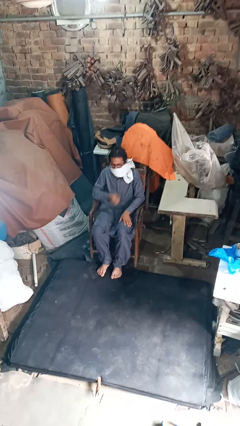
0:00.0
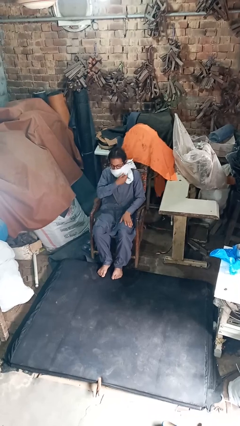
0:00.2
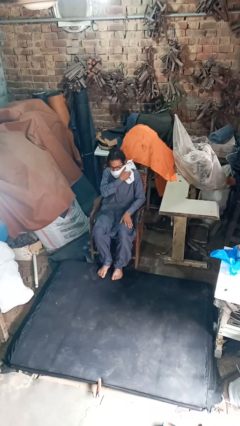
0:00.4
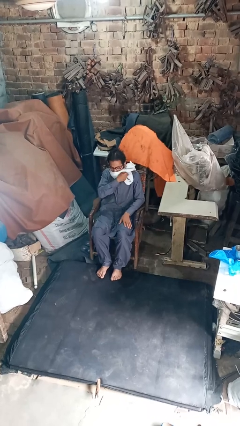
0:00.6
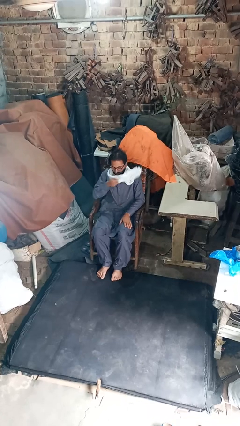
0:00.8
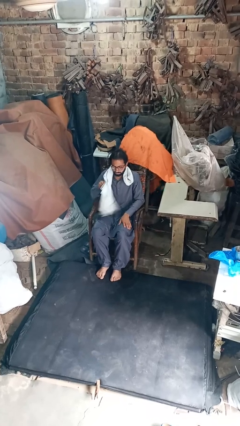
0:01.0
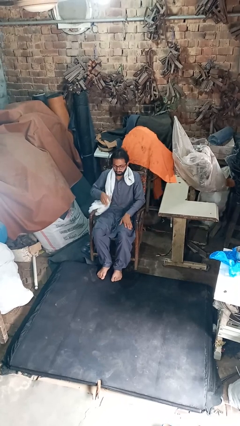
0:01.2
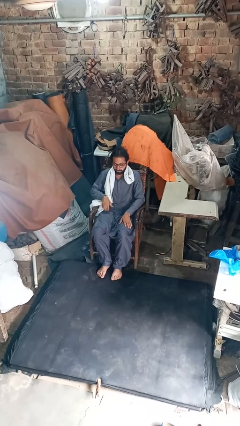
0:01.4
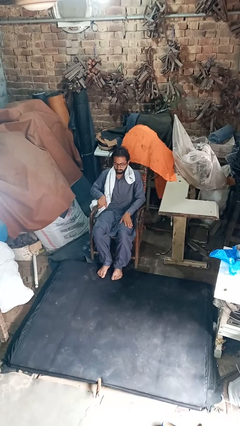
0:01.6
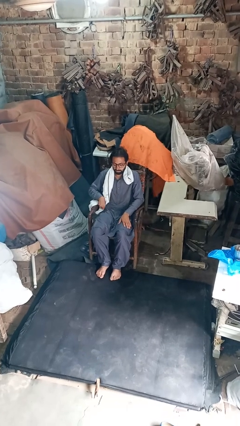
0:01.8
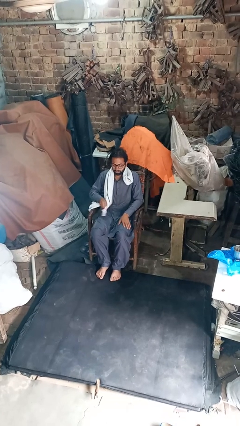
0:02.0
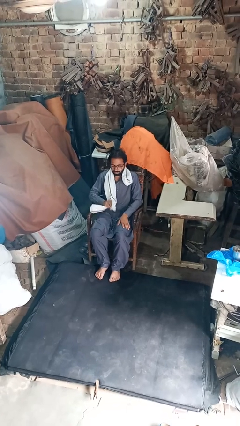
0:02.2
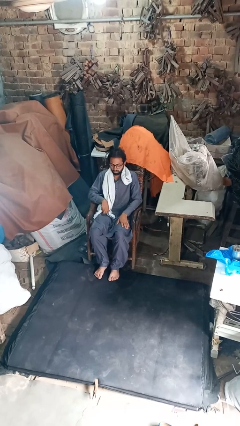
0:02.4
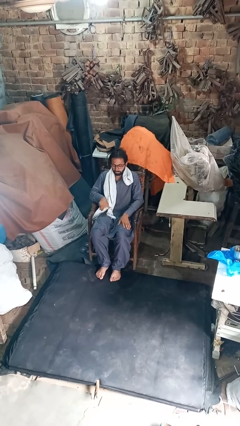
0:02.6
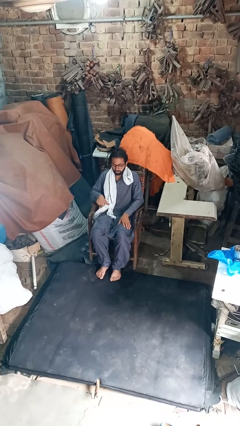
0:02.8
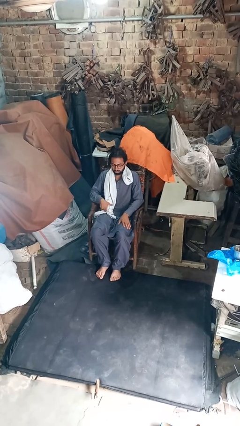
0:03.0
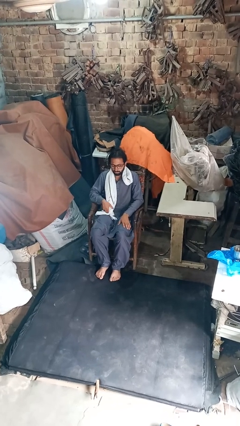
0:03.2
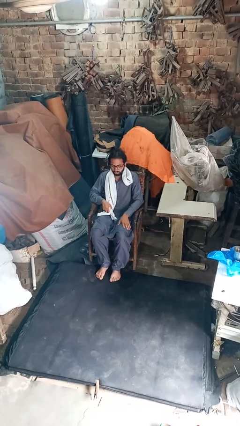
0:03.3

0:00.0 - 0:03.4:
person takes off scarf

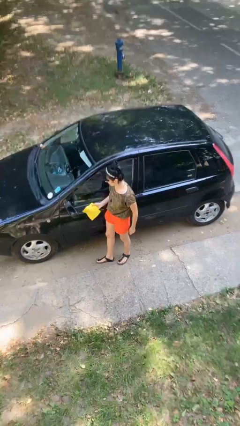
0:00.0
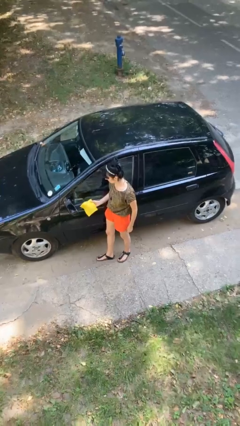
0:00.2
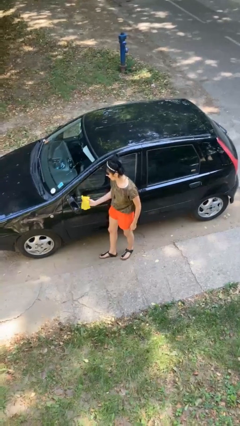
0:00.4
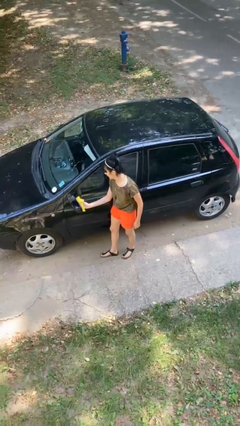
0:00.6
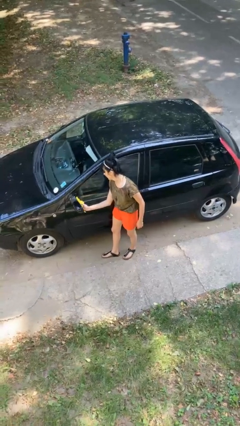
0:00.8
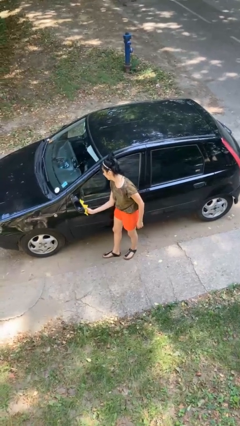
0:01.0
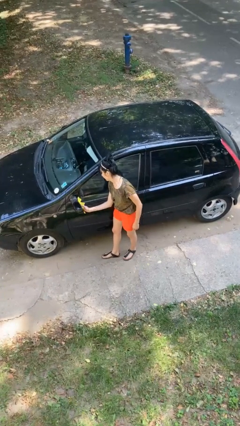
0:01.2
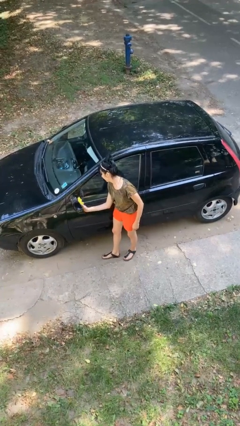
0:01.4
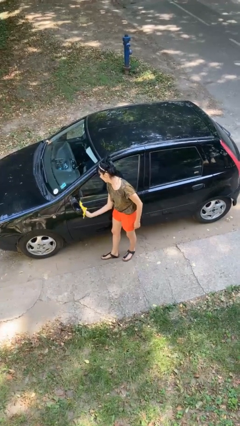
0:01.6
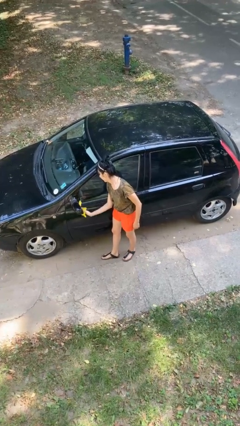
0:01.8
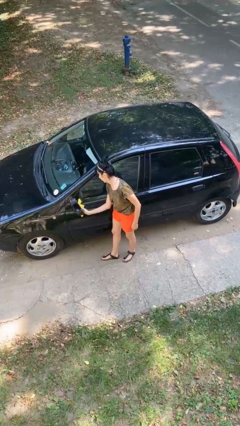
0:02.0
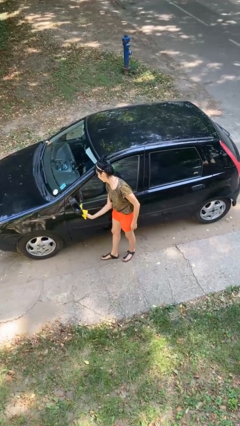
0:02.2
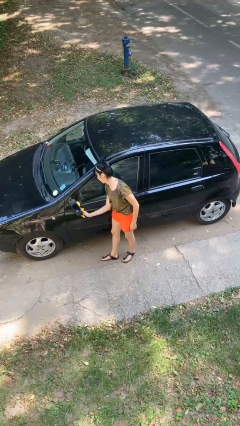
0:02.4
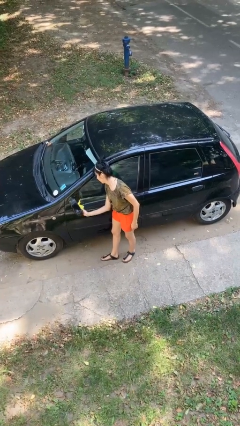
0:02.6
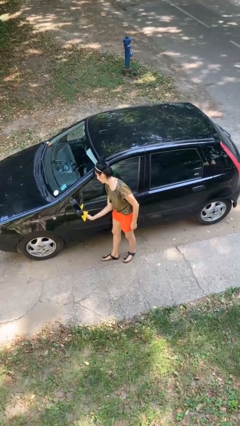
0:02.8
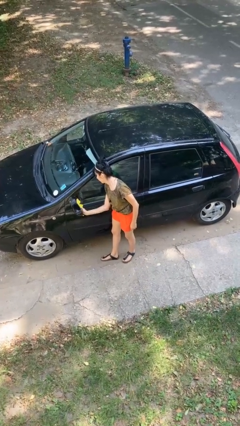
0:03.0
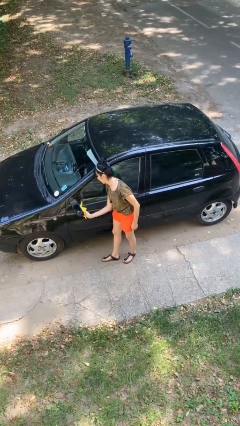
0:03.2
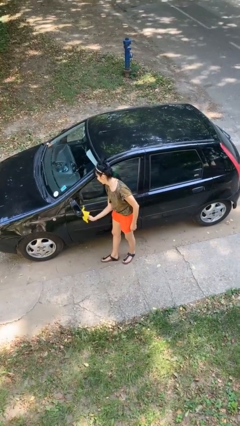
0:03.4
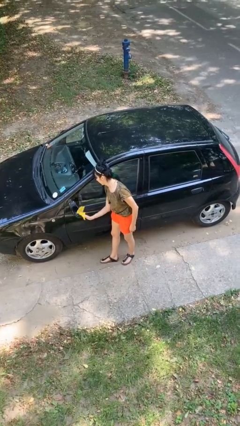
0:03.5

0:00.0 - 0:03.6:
person polishes car with rag

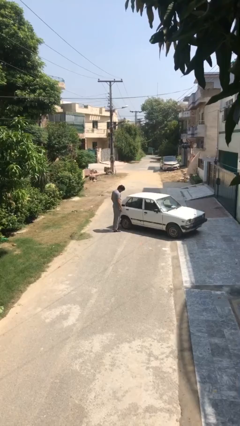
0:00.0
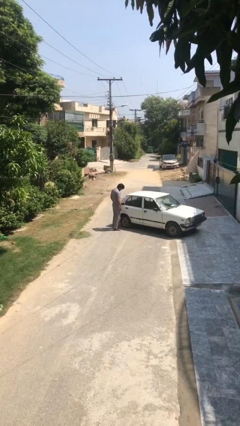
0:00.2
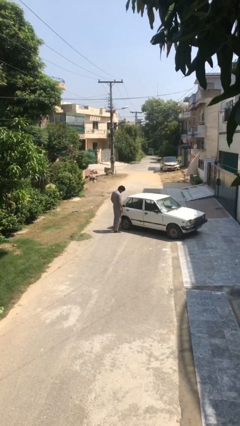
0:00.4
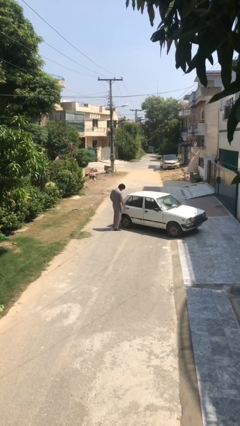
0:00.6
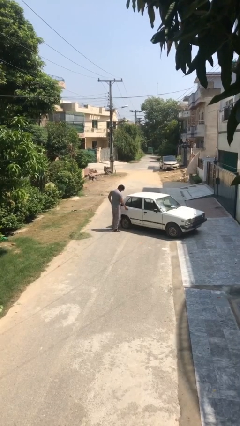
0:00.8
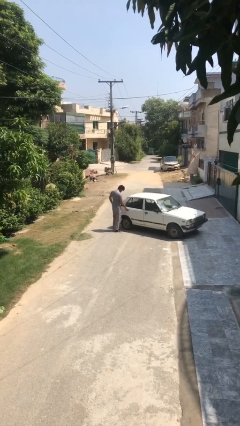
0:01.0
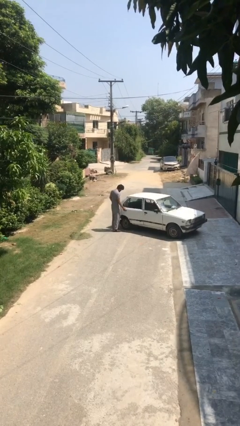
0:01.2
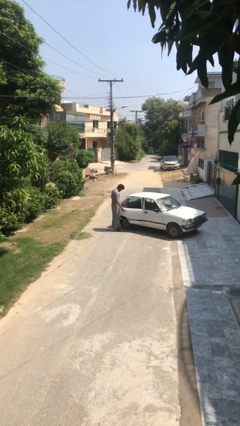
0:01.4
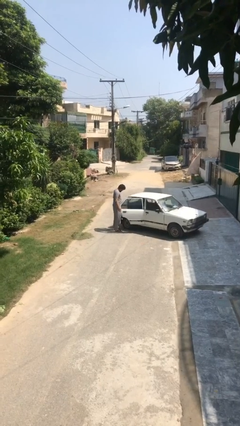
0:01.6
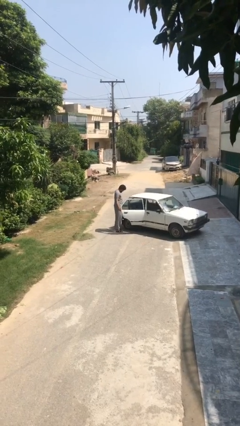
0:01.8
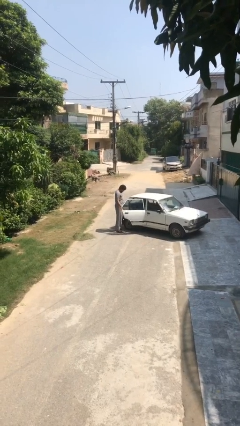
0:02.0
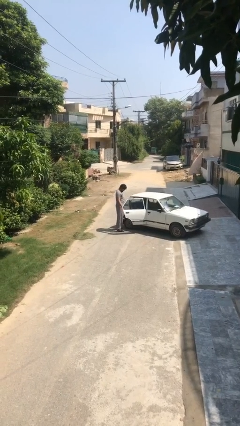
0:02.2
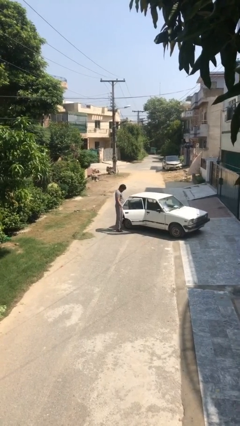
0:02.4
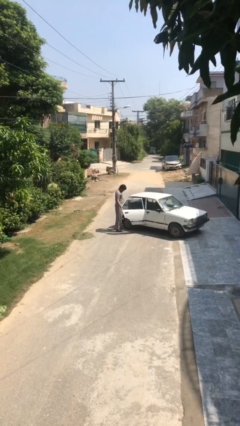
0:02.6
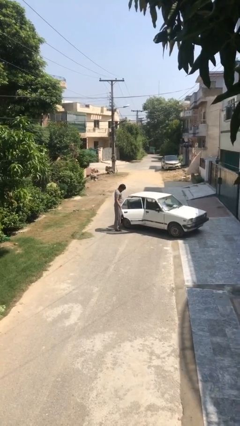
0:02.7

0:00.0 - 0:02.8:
person opens car door

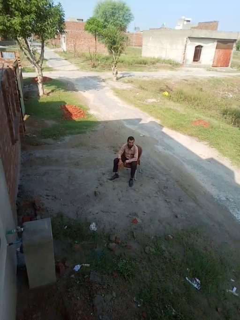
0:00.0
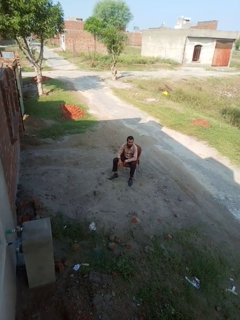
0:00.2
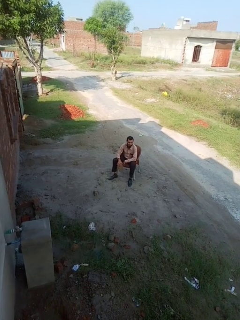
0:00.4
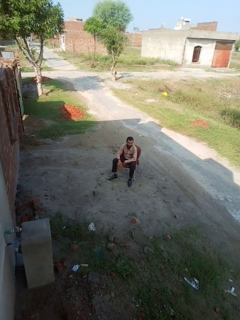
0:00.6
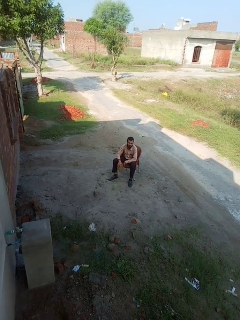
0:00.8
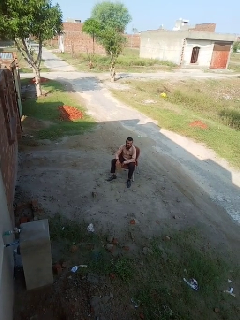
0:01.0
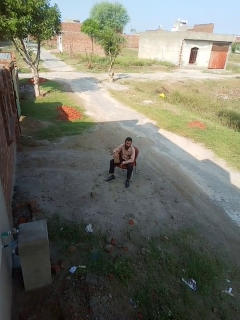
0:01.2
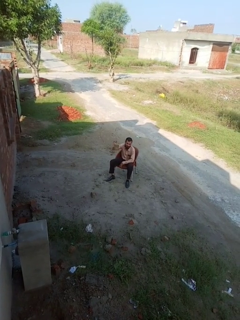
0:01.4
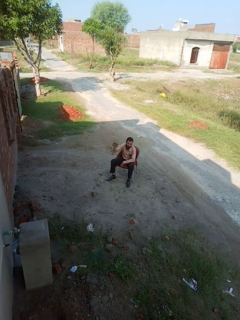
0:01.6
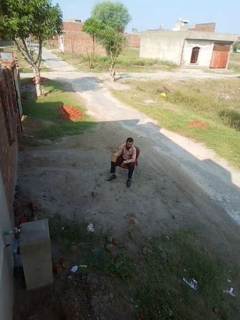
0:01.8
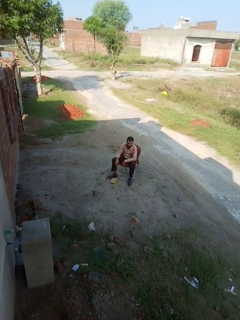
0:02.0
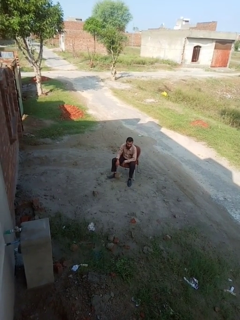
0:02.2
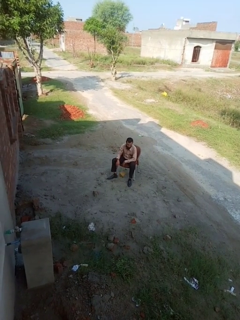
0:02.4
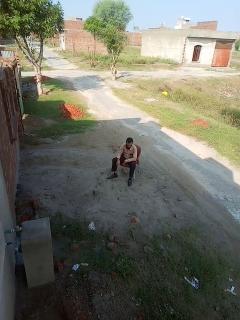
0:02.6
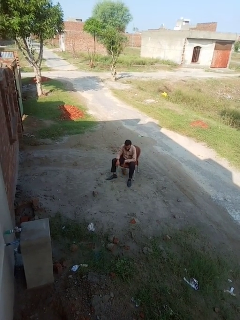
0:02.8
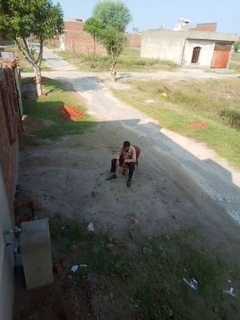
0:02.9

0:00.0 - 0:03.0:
person throws object into air

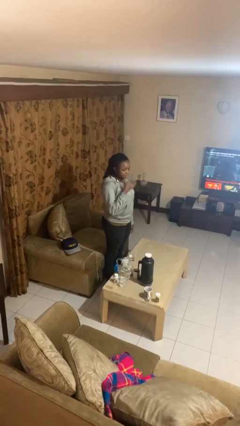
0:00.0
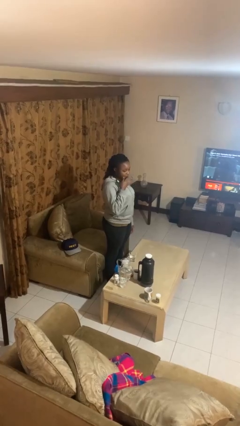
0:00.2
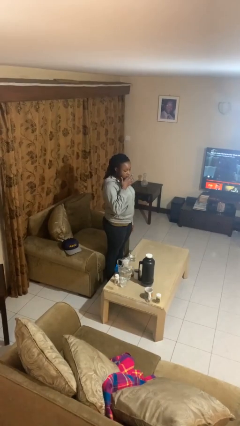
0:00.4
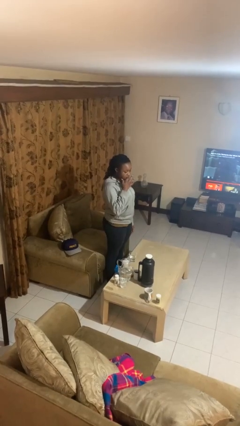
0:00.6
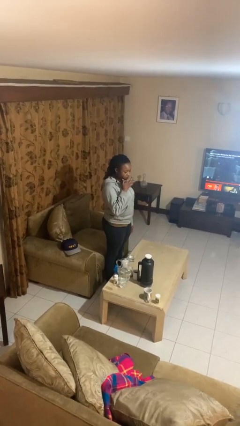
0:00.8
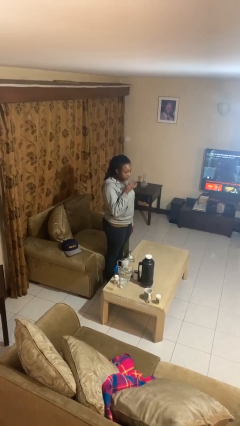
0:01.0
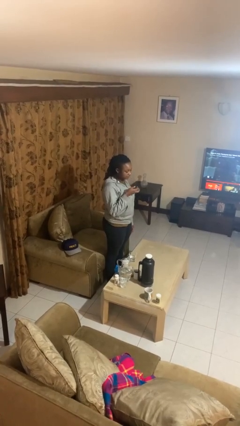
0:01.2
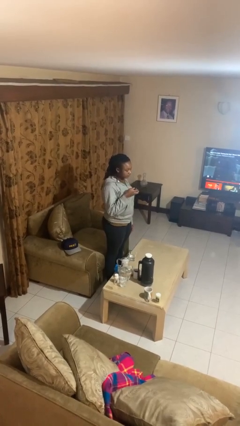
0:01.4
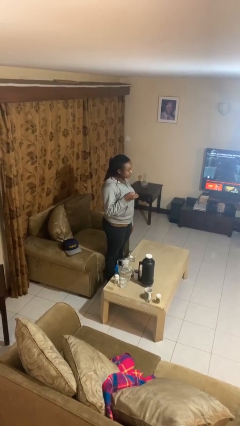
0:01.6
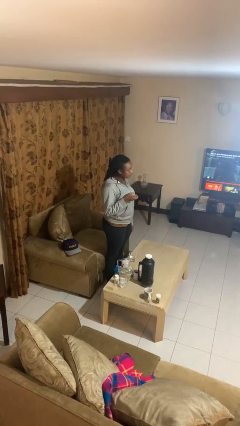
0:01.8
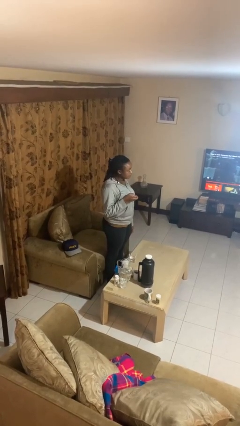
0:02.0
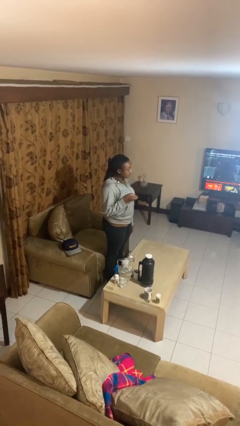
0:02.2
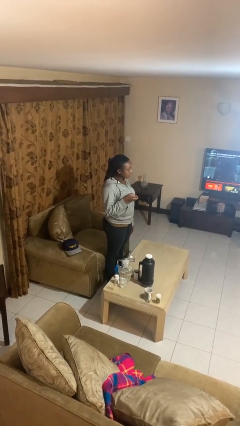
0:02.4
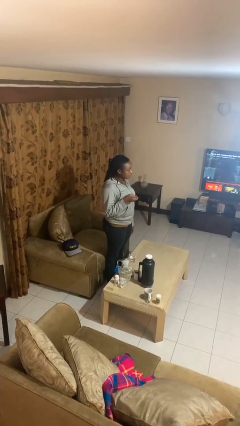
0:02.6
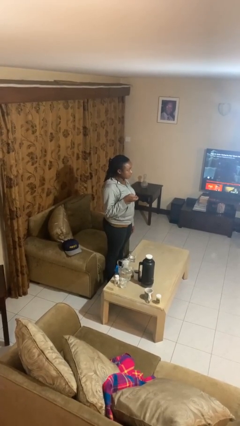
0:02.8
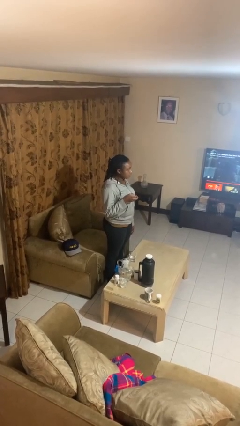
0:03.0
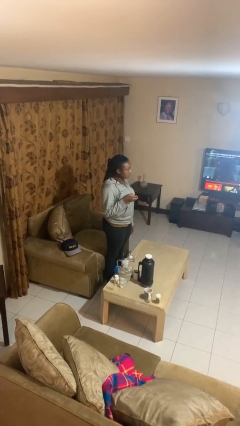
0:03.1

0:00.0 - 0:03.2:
person licks fingers

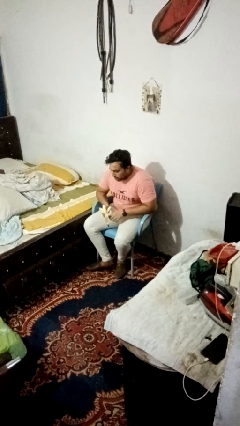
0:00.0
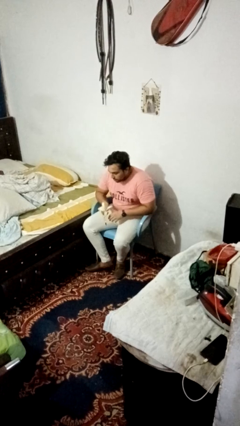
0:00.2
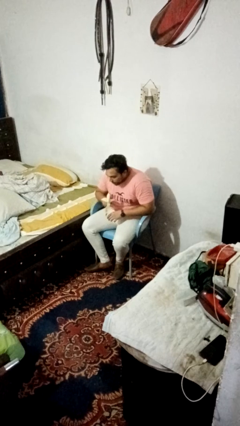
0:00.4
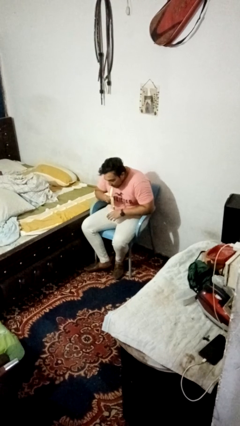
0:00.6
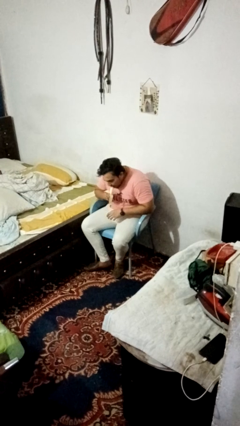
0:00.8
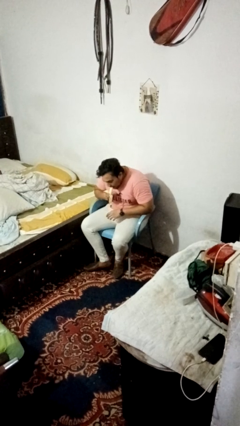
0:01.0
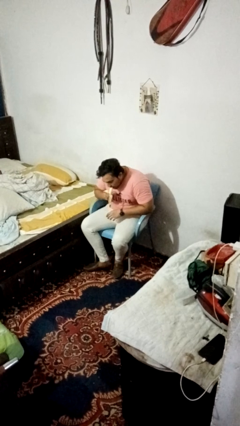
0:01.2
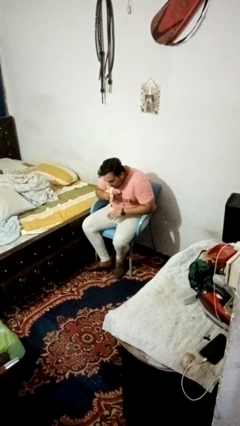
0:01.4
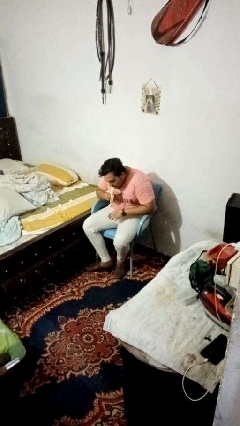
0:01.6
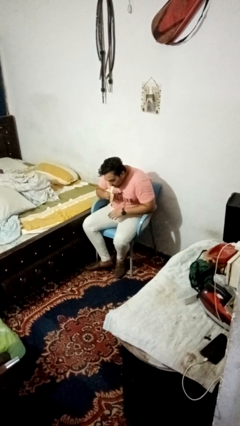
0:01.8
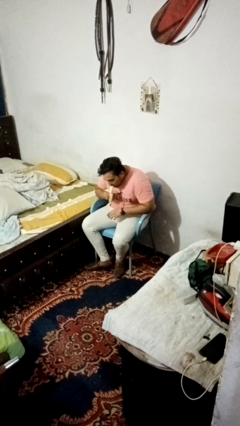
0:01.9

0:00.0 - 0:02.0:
person eats banana

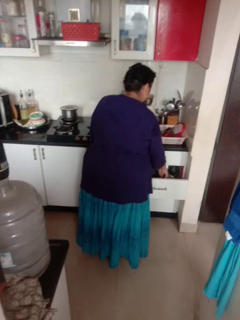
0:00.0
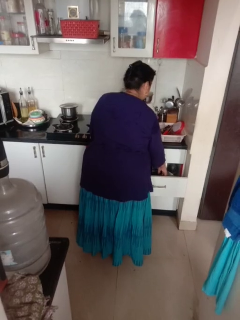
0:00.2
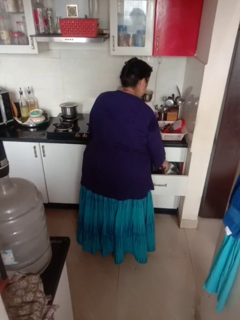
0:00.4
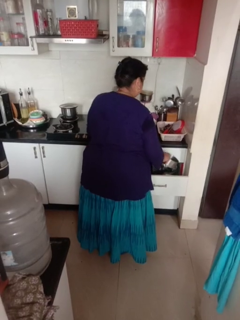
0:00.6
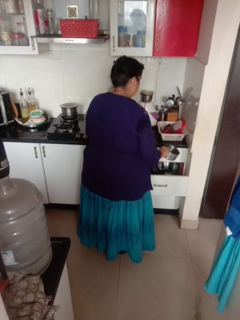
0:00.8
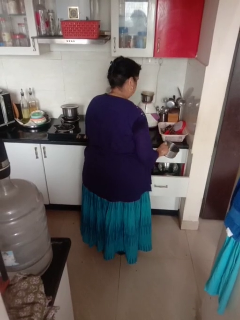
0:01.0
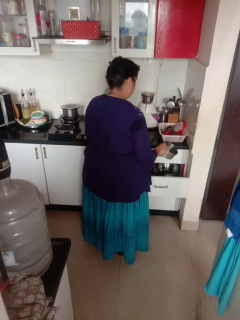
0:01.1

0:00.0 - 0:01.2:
person takes object from kitchen drawer
